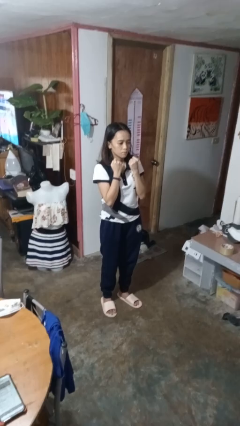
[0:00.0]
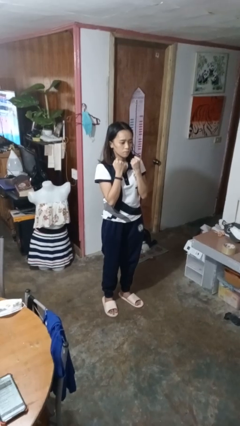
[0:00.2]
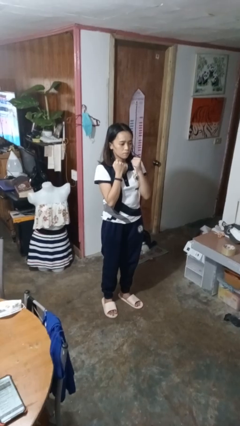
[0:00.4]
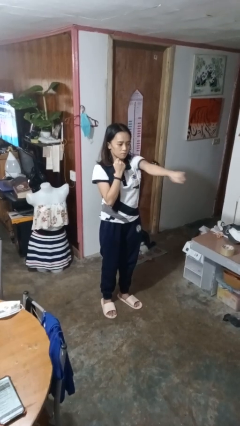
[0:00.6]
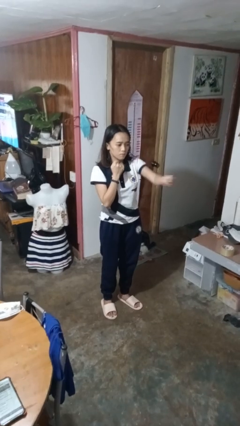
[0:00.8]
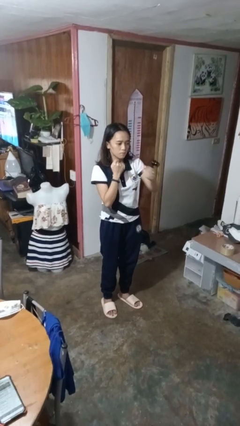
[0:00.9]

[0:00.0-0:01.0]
person punches

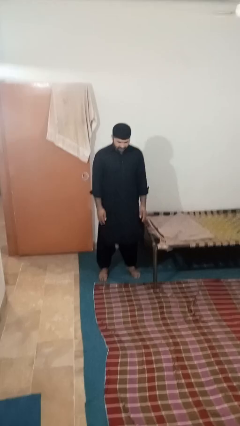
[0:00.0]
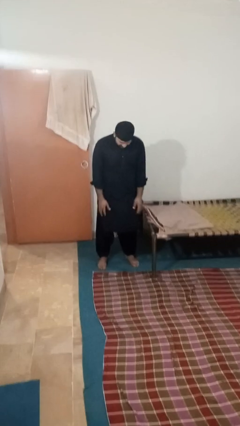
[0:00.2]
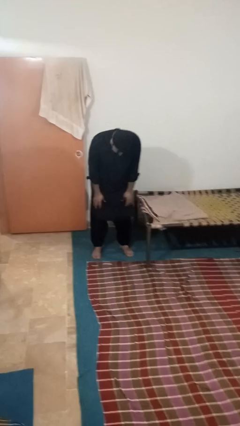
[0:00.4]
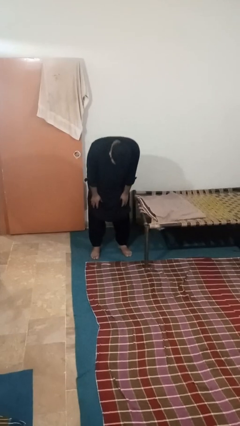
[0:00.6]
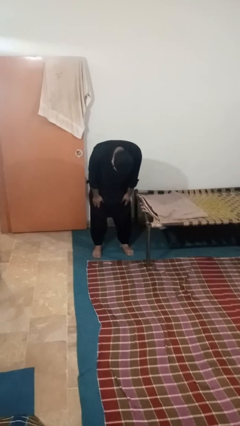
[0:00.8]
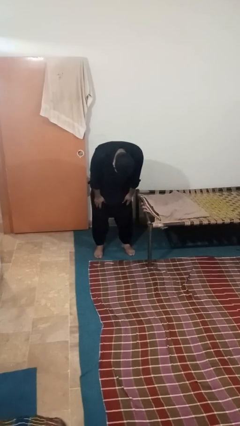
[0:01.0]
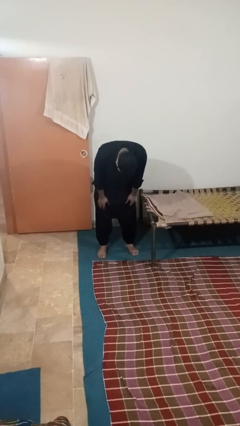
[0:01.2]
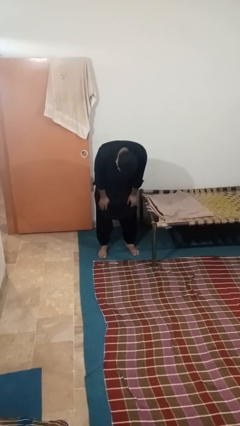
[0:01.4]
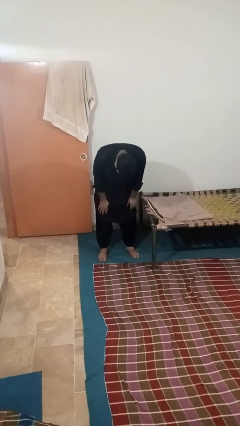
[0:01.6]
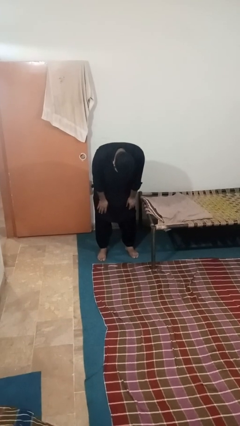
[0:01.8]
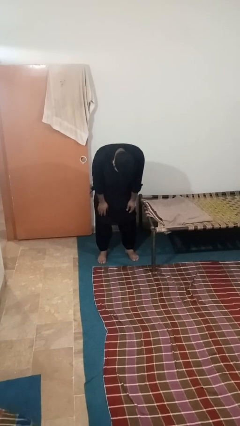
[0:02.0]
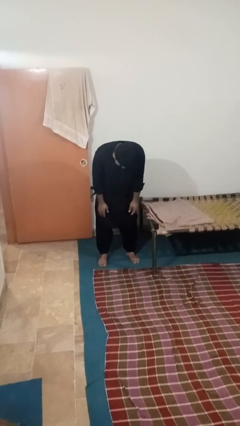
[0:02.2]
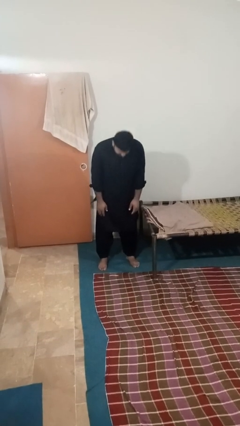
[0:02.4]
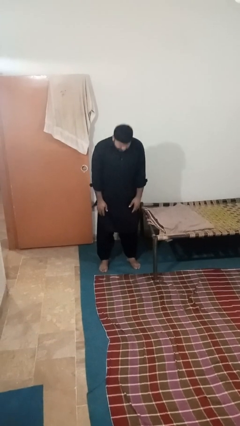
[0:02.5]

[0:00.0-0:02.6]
person bows

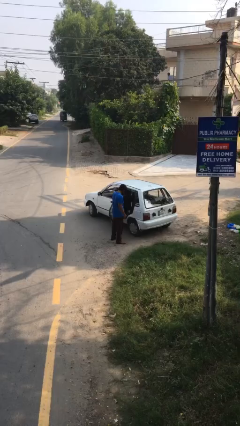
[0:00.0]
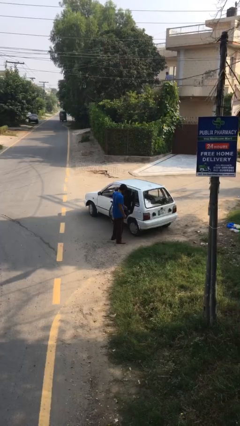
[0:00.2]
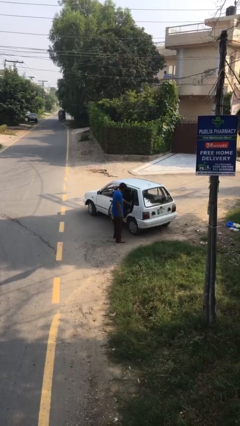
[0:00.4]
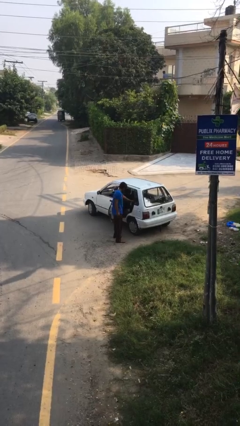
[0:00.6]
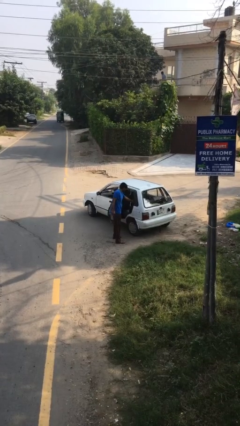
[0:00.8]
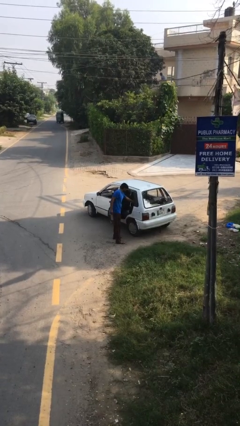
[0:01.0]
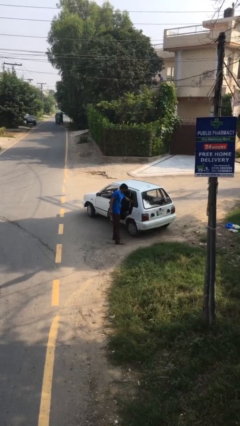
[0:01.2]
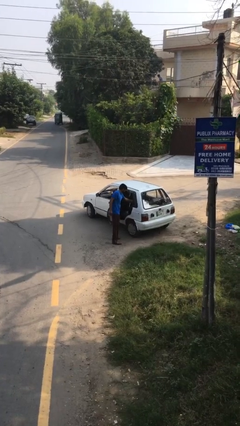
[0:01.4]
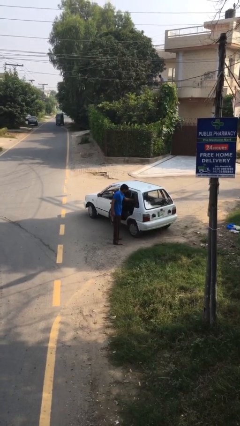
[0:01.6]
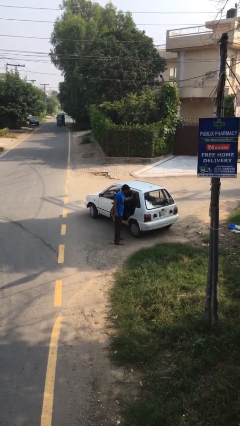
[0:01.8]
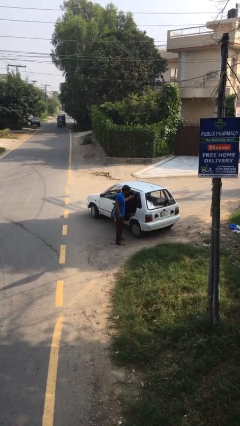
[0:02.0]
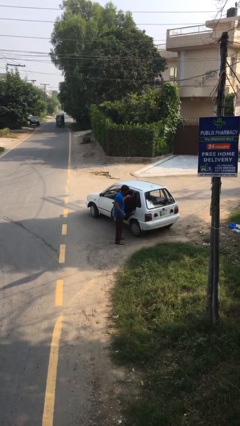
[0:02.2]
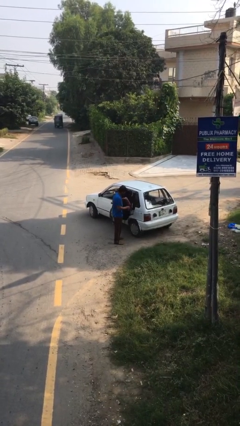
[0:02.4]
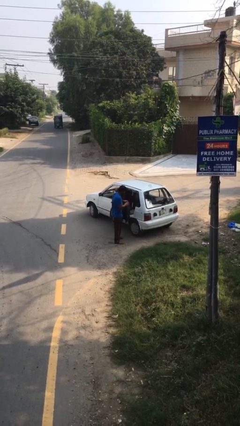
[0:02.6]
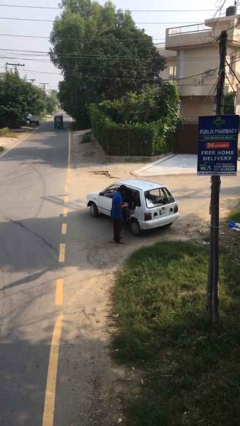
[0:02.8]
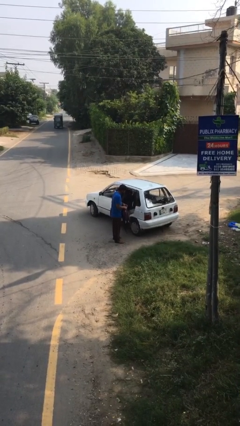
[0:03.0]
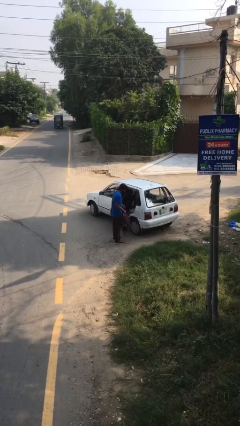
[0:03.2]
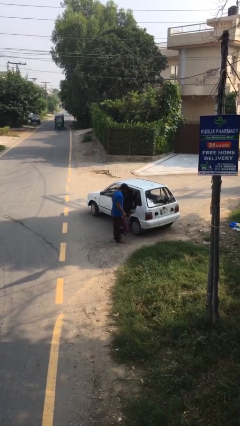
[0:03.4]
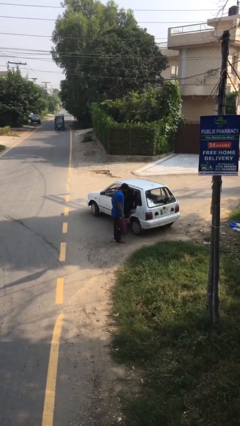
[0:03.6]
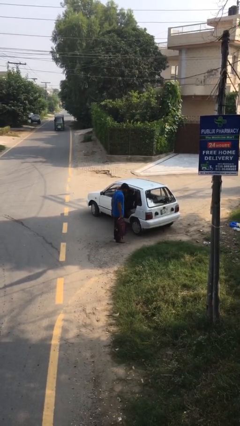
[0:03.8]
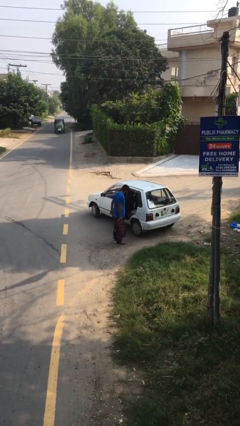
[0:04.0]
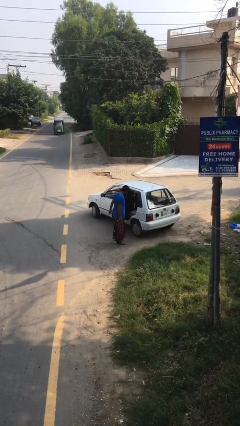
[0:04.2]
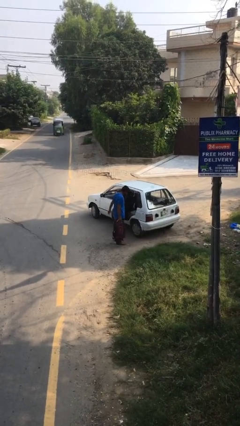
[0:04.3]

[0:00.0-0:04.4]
person unloads car

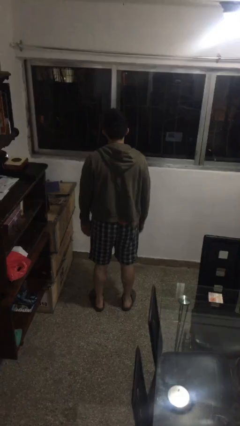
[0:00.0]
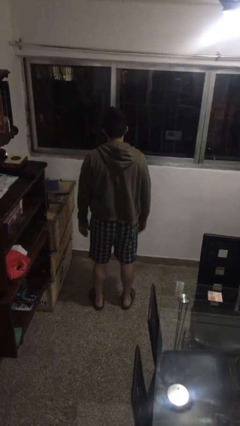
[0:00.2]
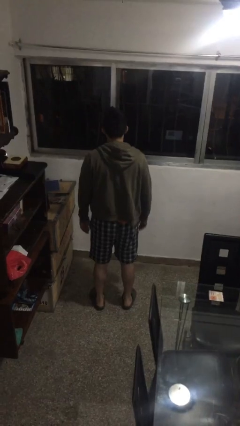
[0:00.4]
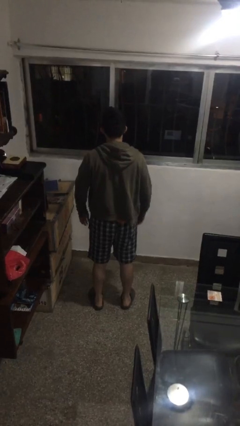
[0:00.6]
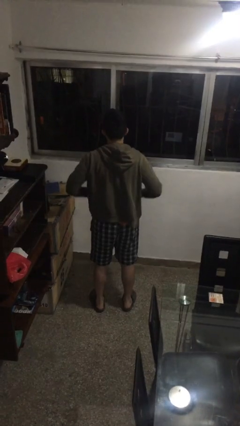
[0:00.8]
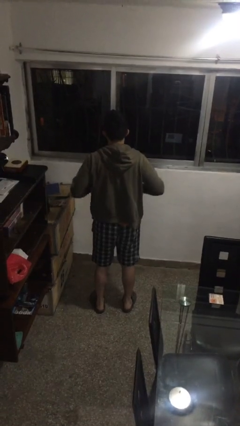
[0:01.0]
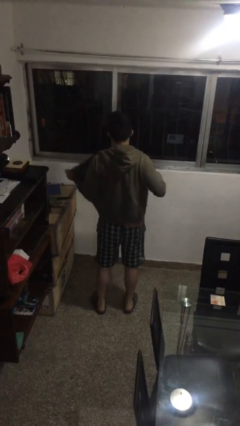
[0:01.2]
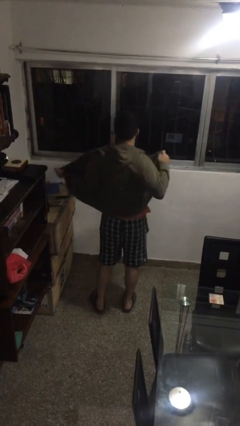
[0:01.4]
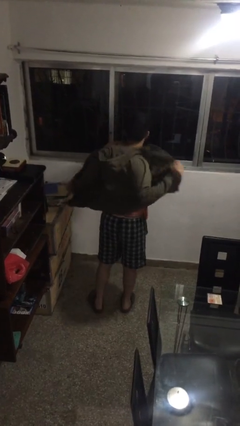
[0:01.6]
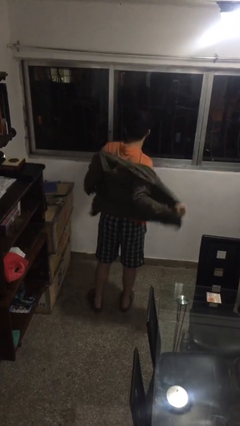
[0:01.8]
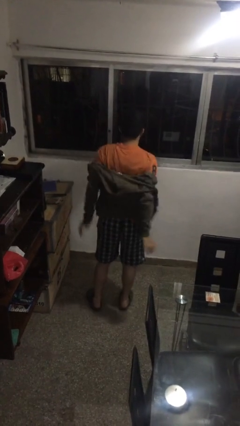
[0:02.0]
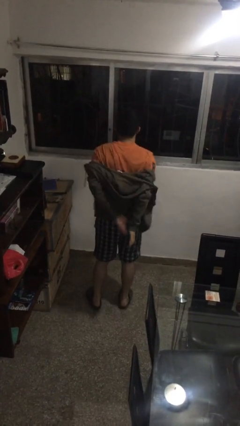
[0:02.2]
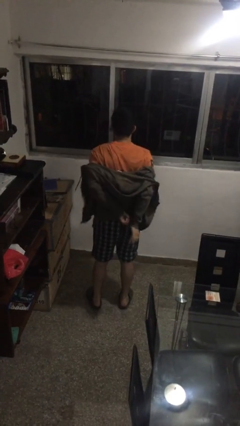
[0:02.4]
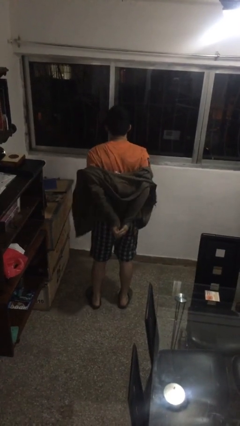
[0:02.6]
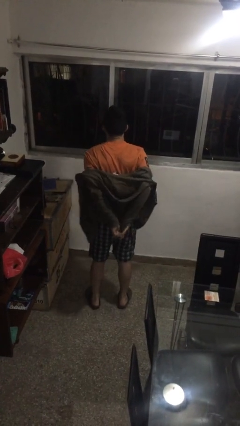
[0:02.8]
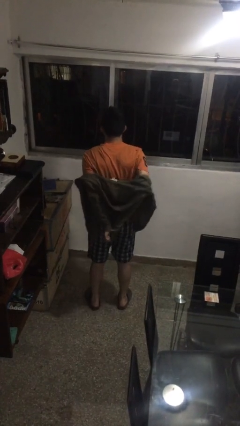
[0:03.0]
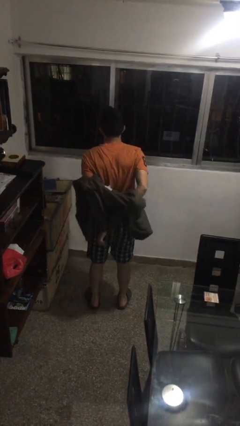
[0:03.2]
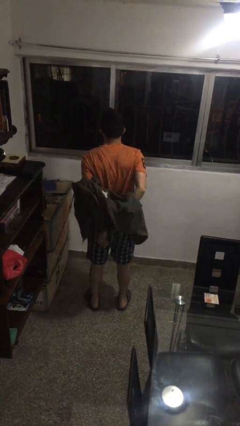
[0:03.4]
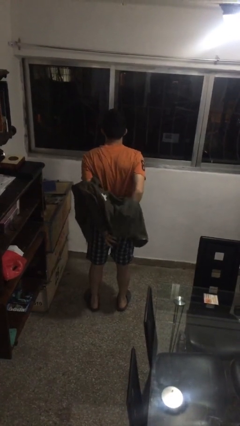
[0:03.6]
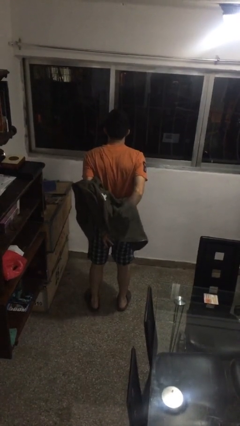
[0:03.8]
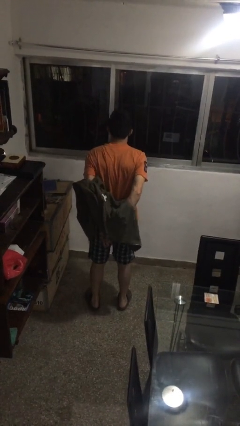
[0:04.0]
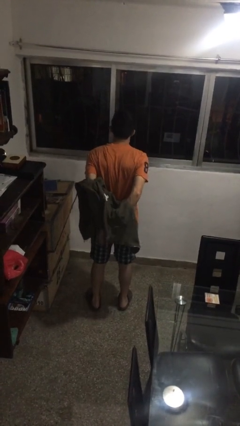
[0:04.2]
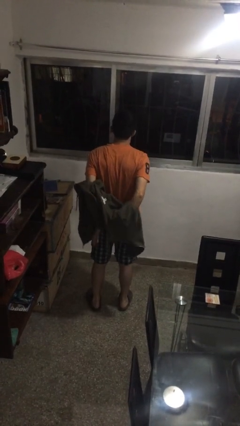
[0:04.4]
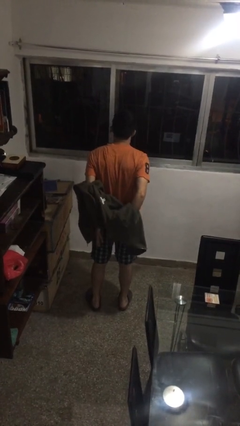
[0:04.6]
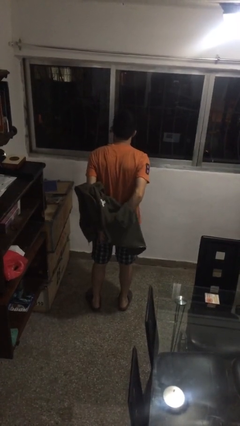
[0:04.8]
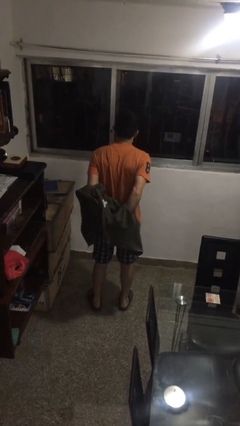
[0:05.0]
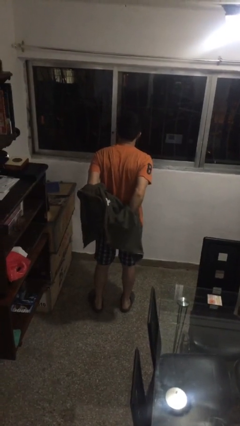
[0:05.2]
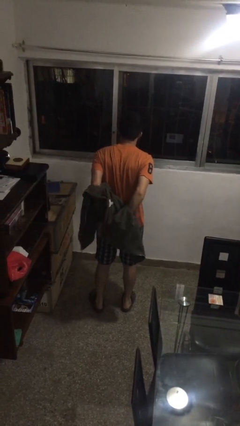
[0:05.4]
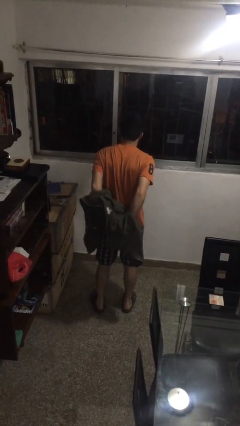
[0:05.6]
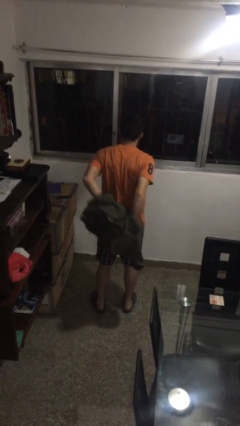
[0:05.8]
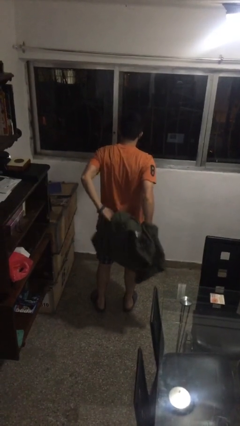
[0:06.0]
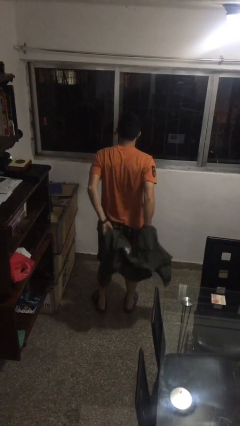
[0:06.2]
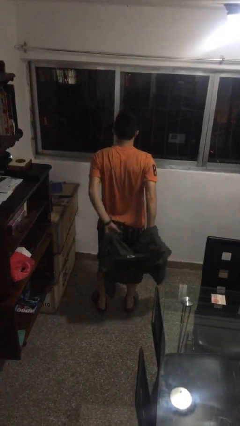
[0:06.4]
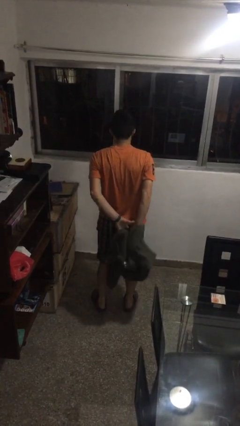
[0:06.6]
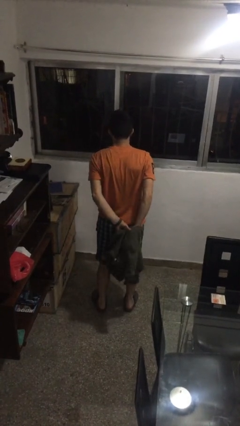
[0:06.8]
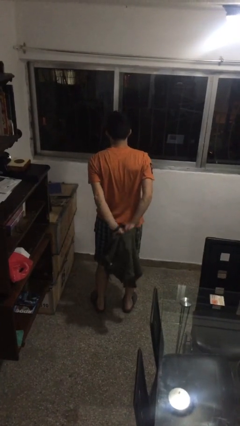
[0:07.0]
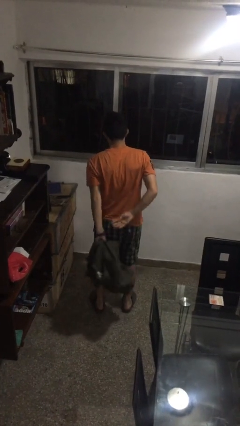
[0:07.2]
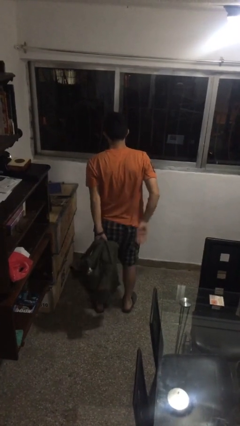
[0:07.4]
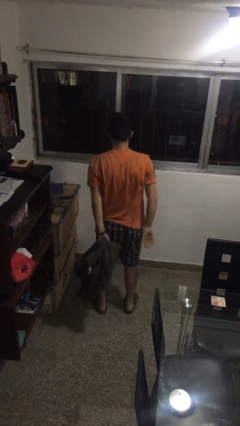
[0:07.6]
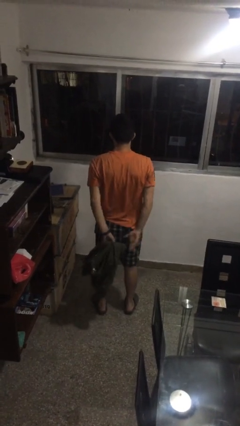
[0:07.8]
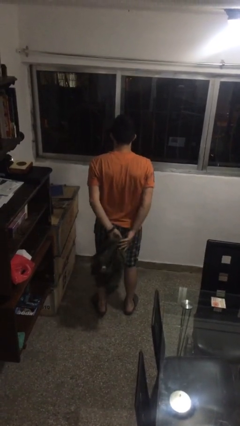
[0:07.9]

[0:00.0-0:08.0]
person takes off jacket

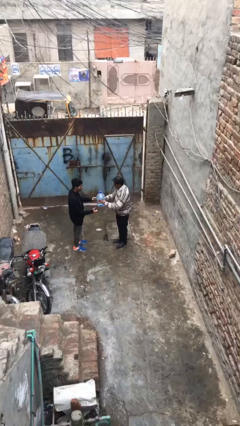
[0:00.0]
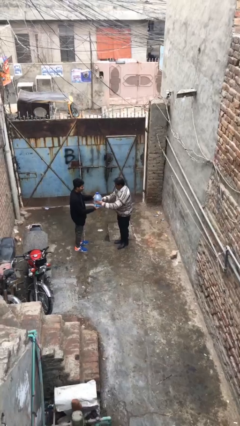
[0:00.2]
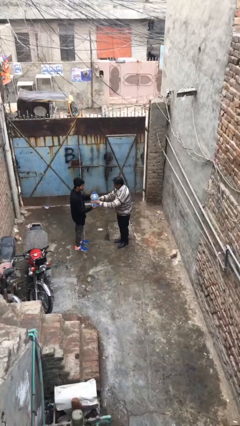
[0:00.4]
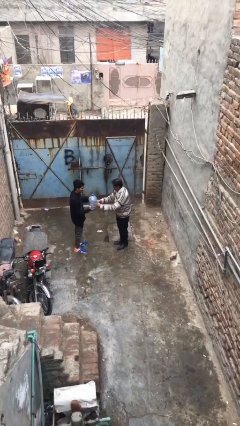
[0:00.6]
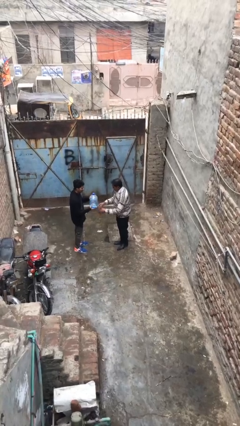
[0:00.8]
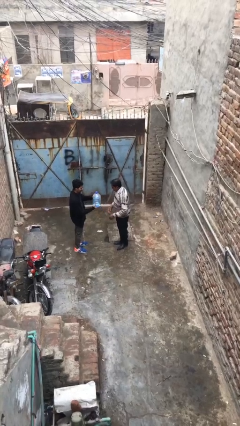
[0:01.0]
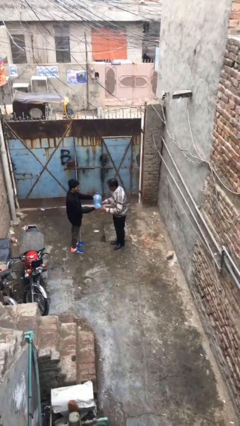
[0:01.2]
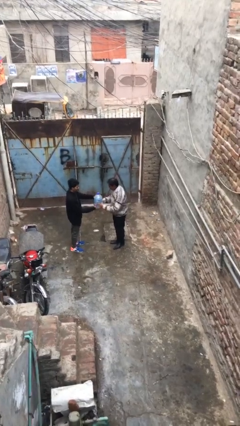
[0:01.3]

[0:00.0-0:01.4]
person transfers object to person
